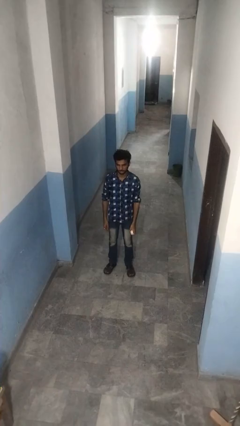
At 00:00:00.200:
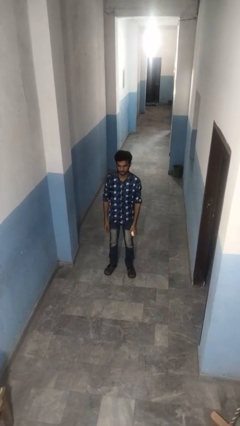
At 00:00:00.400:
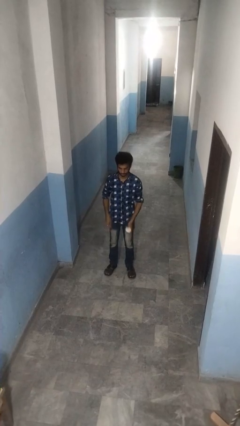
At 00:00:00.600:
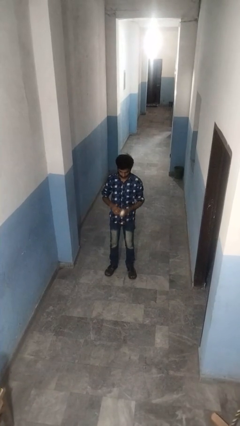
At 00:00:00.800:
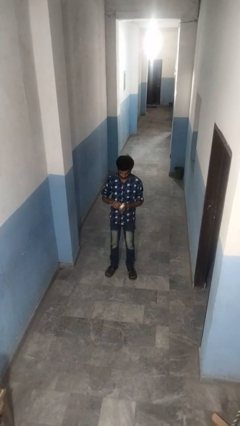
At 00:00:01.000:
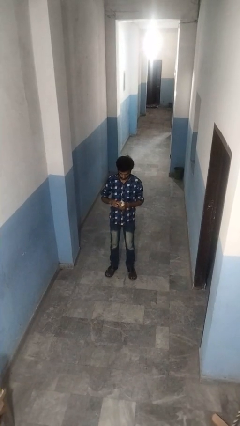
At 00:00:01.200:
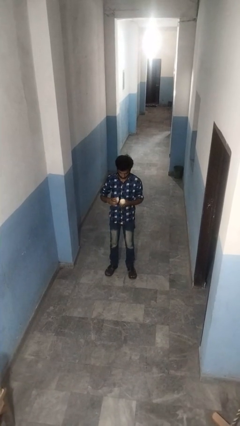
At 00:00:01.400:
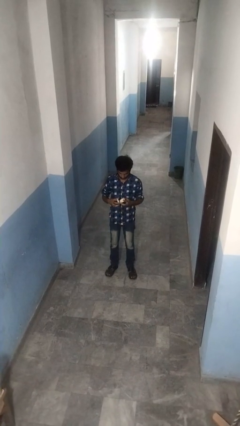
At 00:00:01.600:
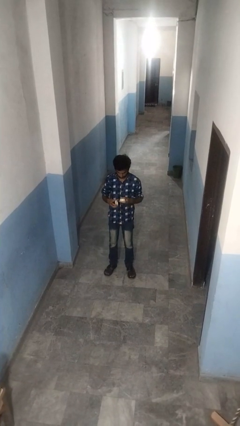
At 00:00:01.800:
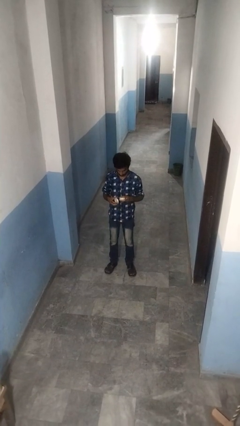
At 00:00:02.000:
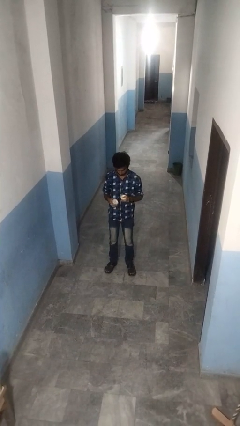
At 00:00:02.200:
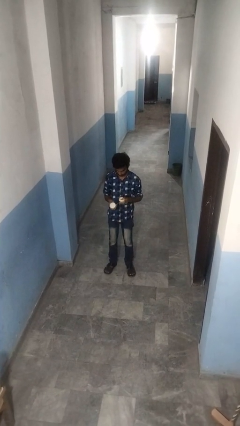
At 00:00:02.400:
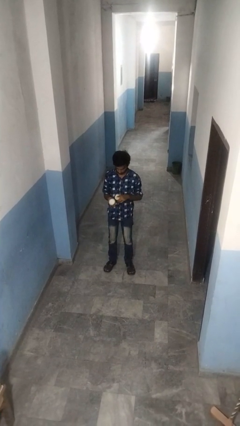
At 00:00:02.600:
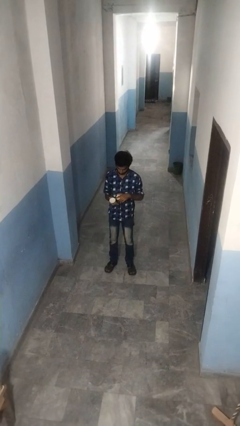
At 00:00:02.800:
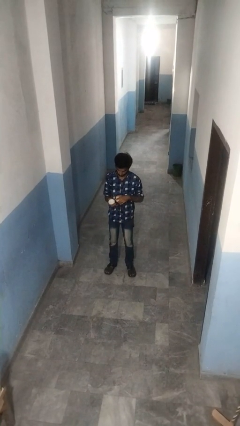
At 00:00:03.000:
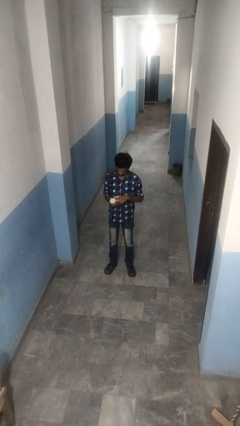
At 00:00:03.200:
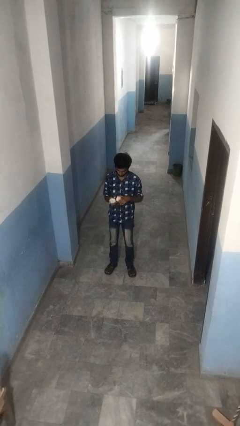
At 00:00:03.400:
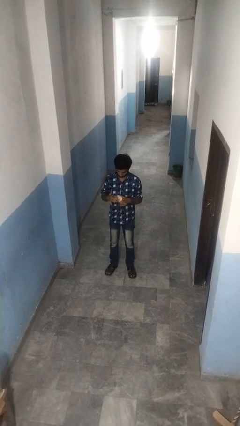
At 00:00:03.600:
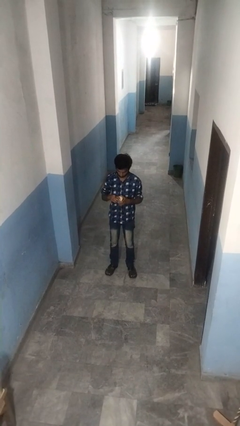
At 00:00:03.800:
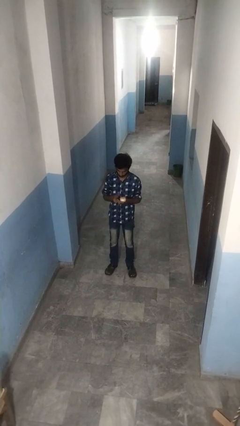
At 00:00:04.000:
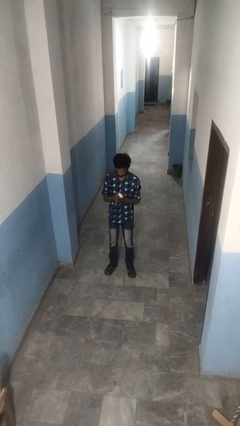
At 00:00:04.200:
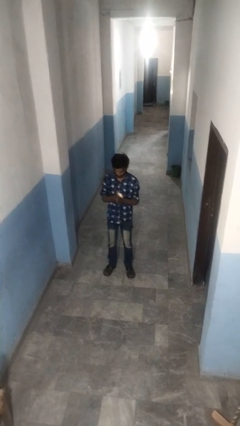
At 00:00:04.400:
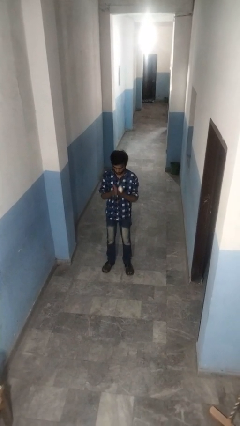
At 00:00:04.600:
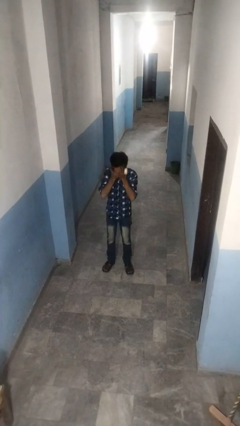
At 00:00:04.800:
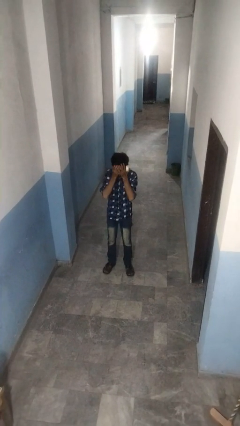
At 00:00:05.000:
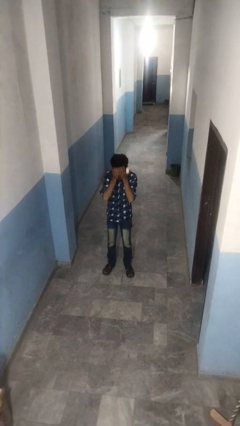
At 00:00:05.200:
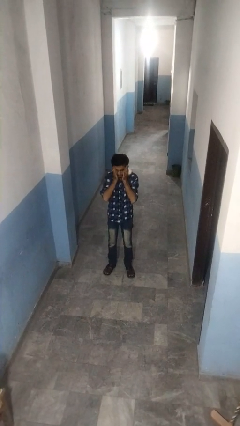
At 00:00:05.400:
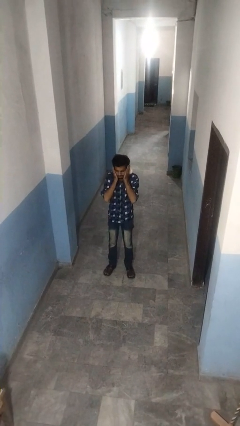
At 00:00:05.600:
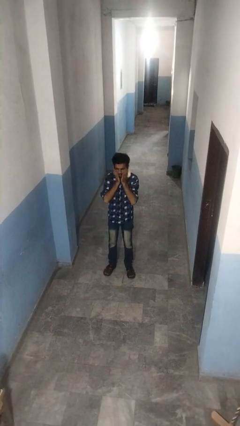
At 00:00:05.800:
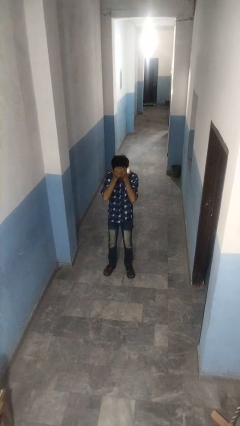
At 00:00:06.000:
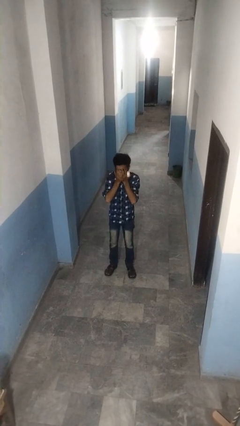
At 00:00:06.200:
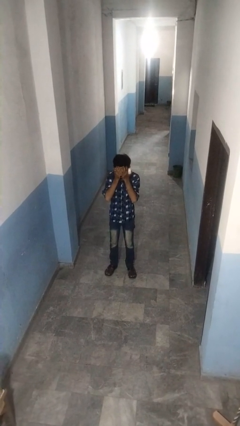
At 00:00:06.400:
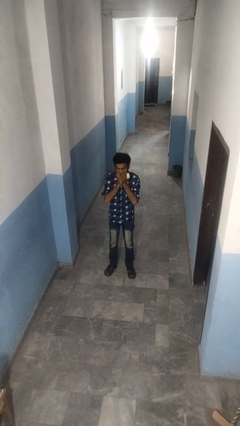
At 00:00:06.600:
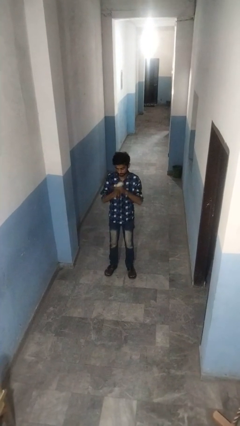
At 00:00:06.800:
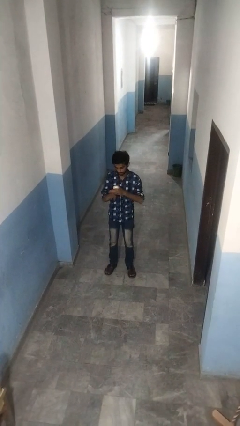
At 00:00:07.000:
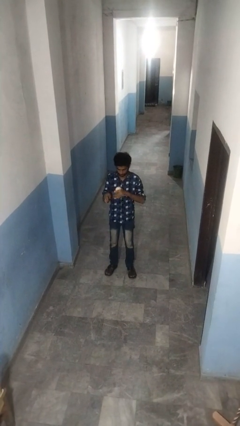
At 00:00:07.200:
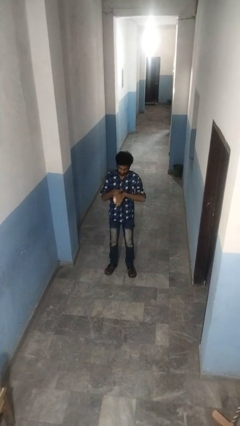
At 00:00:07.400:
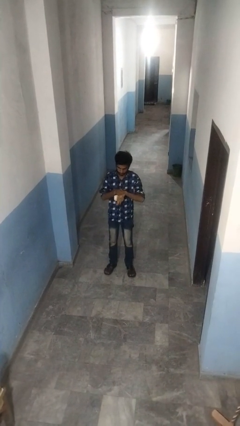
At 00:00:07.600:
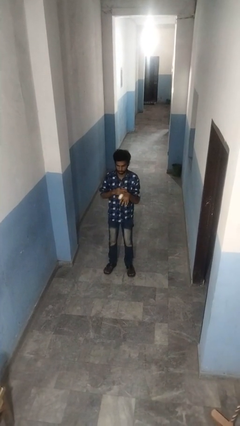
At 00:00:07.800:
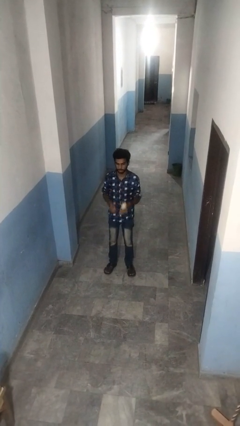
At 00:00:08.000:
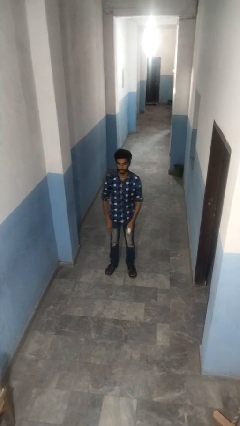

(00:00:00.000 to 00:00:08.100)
person applies facial moisturizer

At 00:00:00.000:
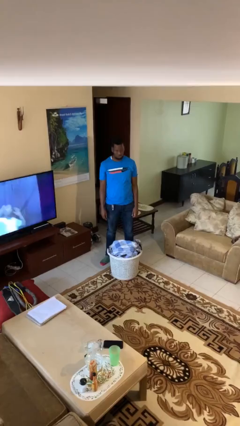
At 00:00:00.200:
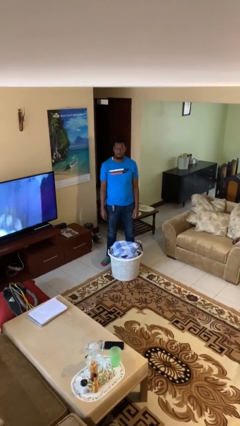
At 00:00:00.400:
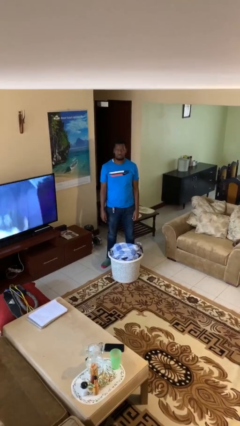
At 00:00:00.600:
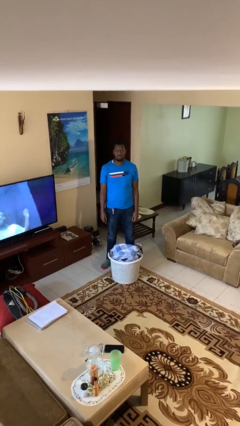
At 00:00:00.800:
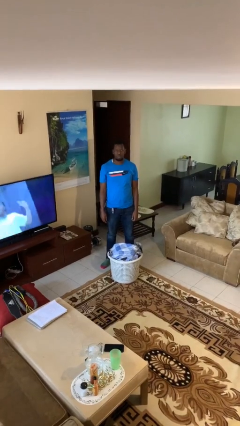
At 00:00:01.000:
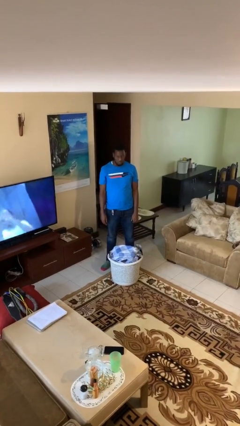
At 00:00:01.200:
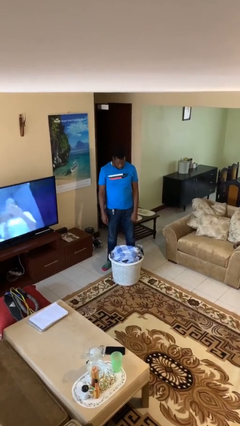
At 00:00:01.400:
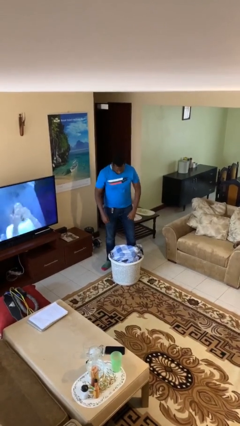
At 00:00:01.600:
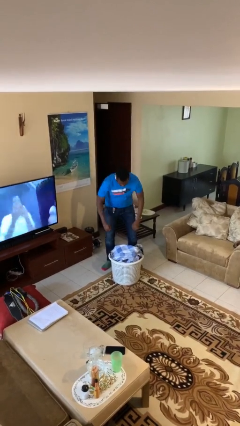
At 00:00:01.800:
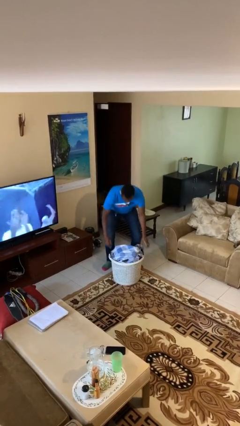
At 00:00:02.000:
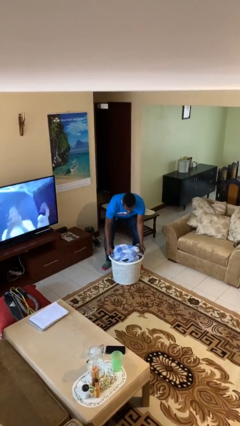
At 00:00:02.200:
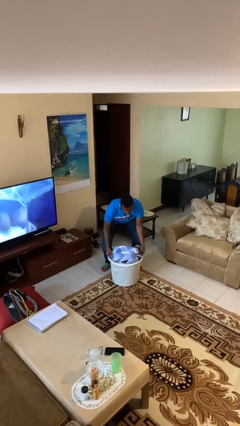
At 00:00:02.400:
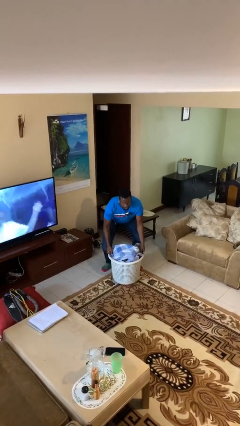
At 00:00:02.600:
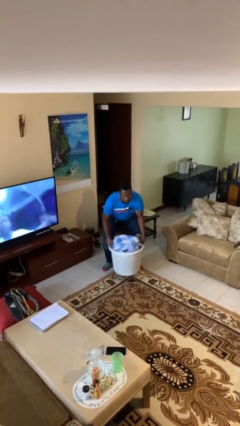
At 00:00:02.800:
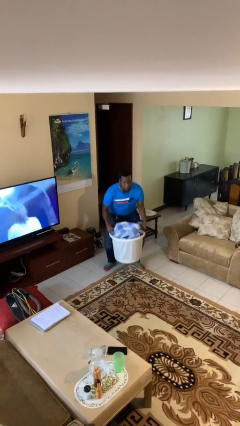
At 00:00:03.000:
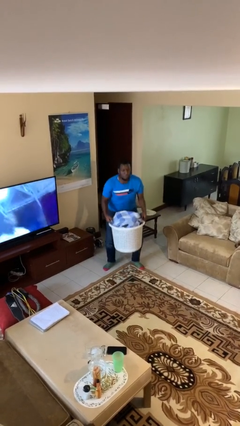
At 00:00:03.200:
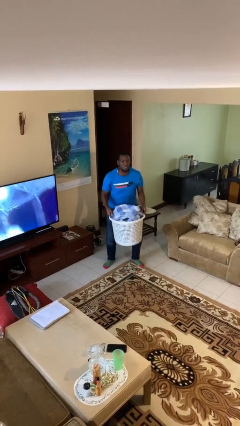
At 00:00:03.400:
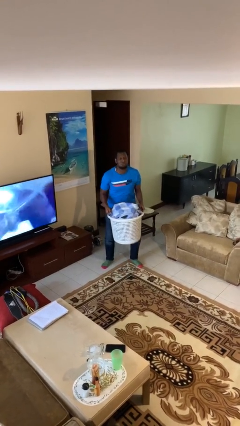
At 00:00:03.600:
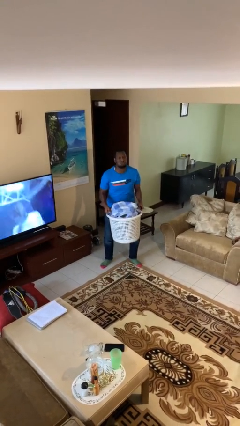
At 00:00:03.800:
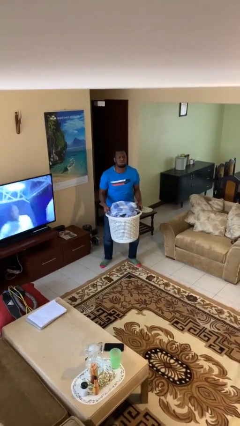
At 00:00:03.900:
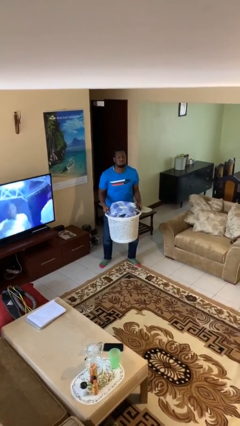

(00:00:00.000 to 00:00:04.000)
person picks up object from floor

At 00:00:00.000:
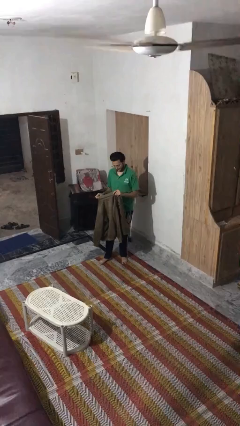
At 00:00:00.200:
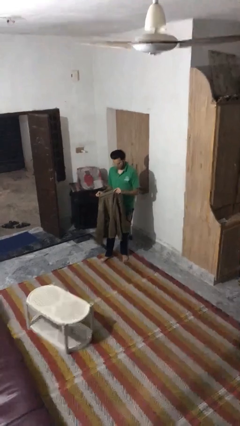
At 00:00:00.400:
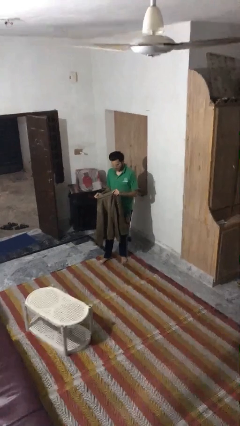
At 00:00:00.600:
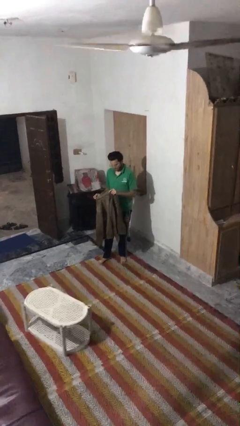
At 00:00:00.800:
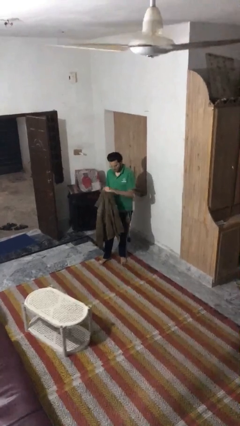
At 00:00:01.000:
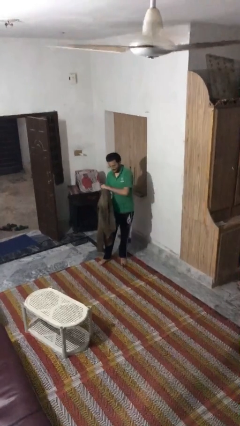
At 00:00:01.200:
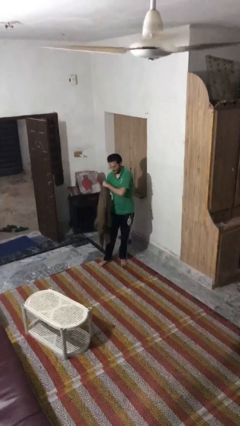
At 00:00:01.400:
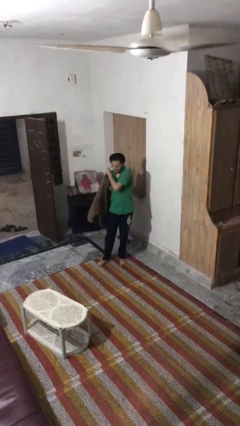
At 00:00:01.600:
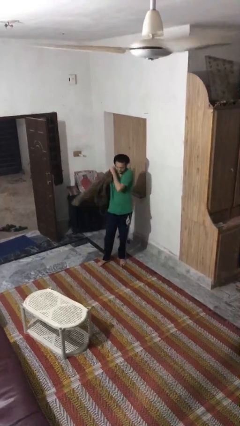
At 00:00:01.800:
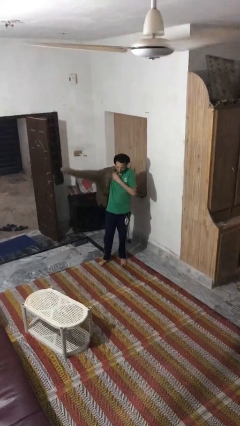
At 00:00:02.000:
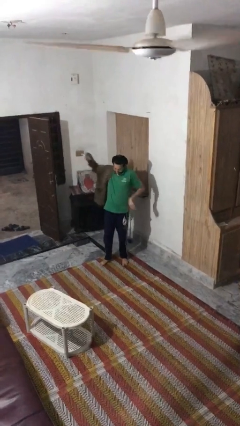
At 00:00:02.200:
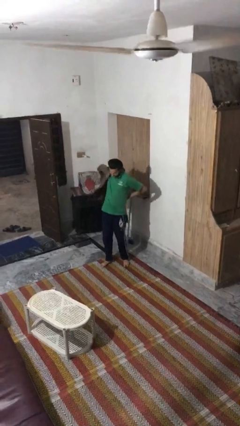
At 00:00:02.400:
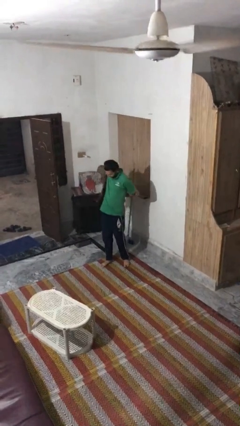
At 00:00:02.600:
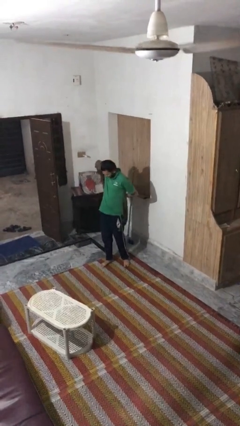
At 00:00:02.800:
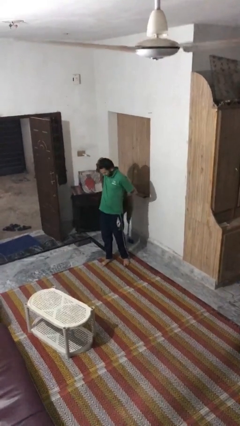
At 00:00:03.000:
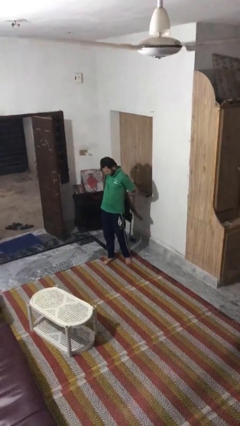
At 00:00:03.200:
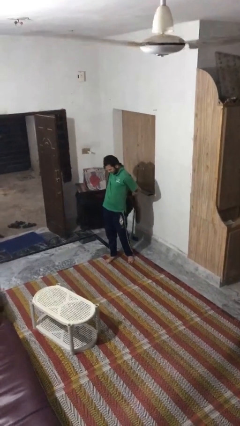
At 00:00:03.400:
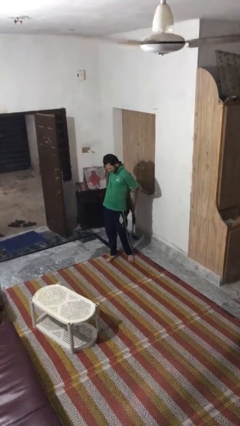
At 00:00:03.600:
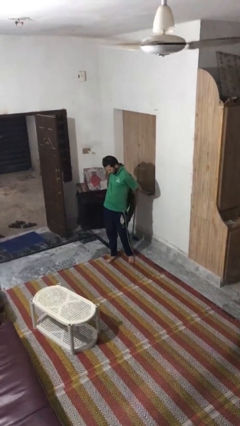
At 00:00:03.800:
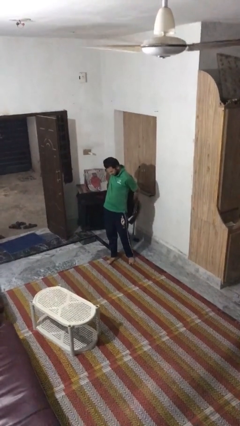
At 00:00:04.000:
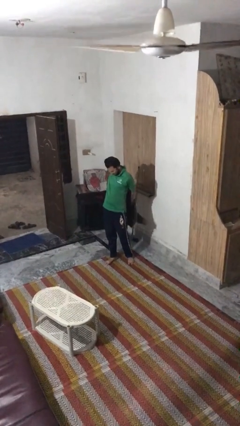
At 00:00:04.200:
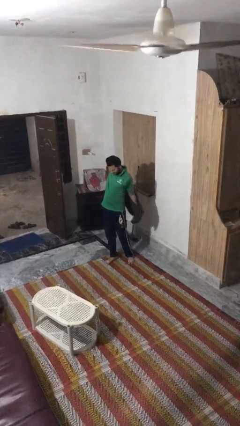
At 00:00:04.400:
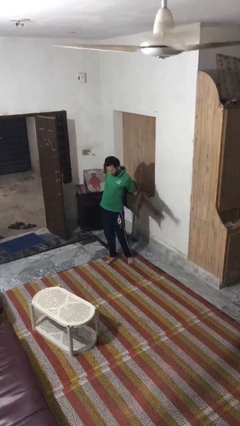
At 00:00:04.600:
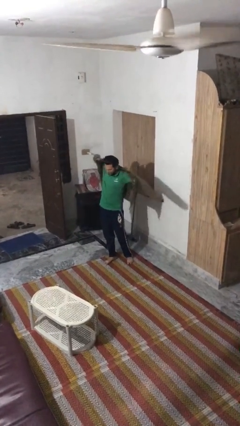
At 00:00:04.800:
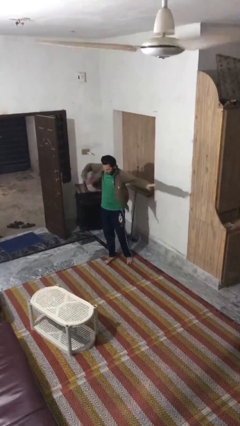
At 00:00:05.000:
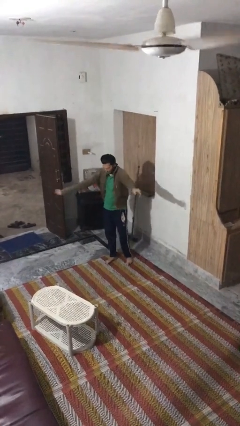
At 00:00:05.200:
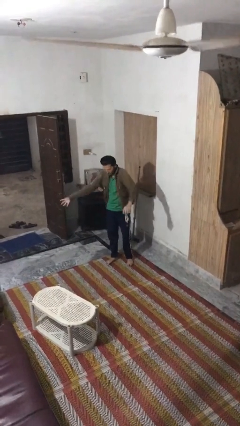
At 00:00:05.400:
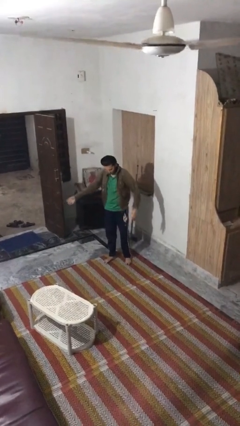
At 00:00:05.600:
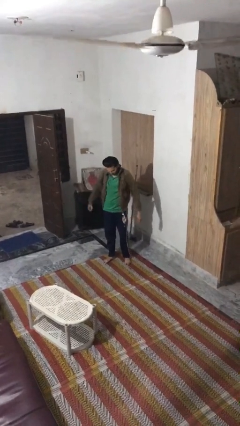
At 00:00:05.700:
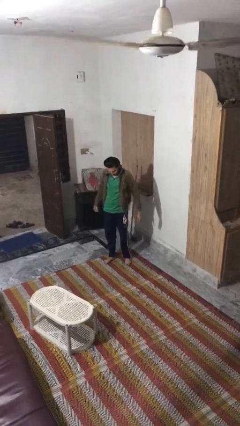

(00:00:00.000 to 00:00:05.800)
person puts on jacket
